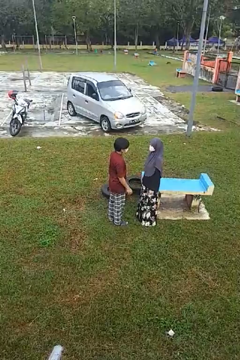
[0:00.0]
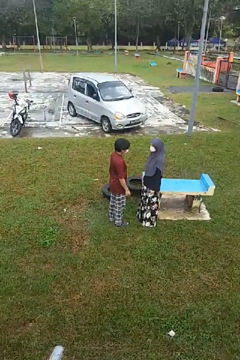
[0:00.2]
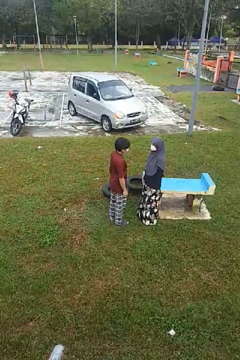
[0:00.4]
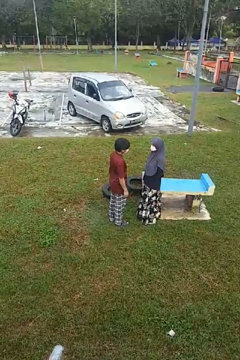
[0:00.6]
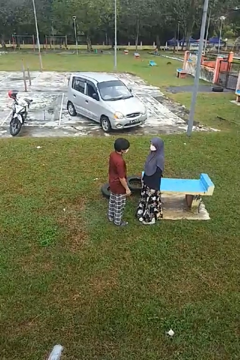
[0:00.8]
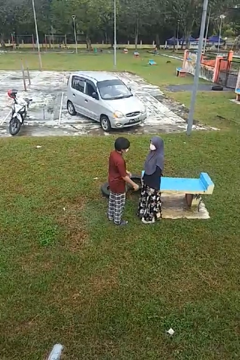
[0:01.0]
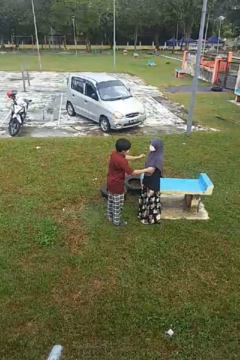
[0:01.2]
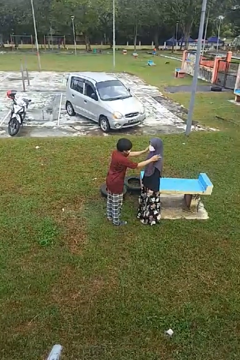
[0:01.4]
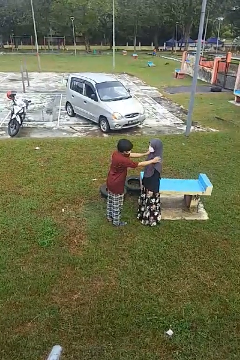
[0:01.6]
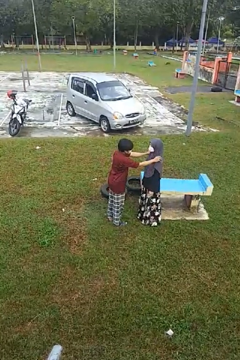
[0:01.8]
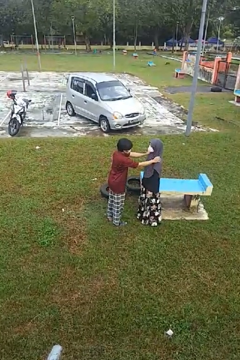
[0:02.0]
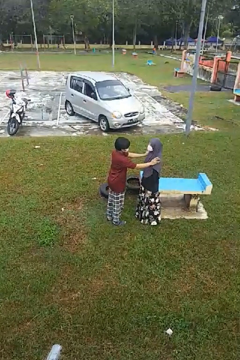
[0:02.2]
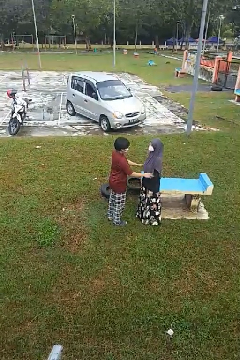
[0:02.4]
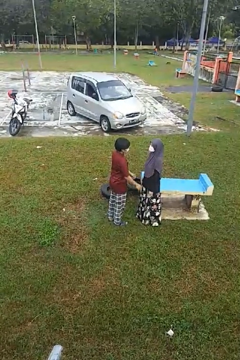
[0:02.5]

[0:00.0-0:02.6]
person pounds shoulders of person

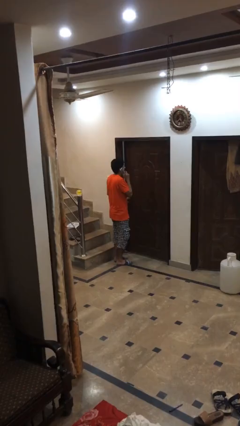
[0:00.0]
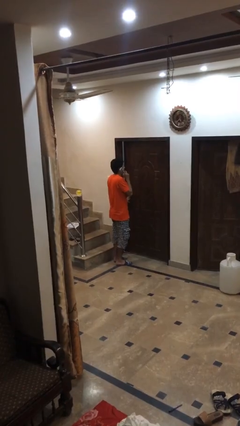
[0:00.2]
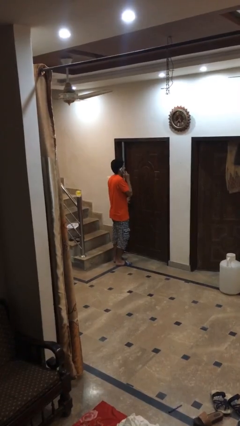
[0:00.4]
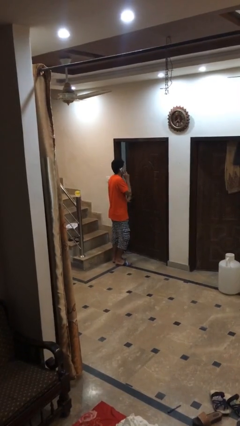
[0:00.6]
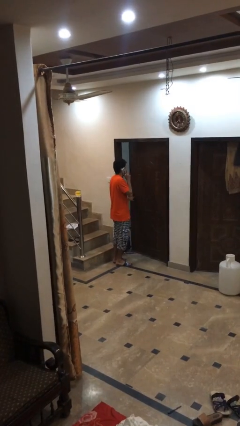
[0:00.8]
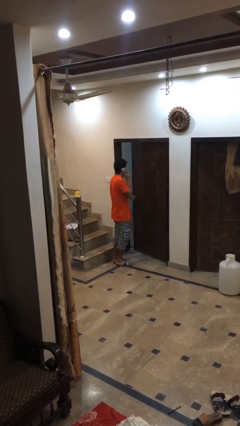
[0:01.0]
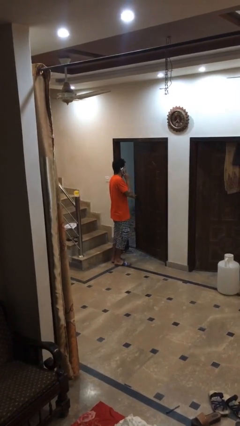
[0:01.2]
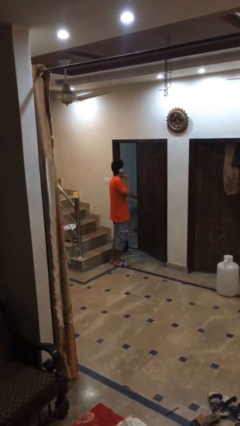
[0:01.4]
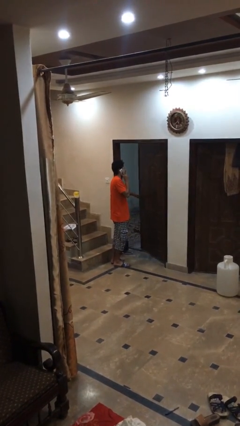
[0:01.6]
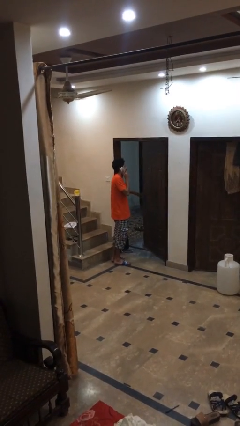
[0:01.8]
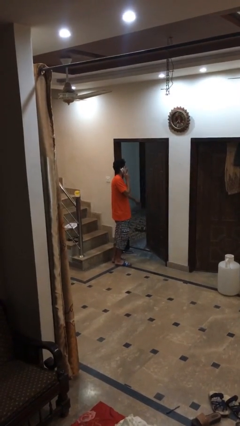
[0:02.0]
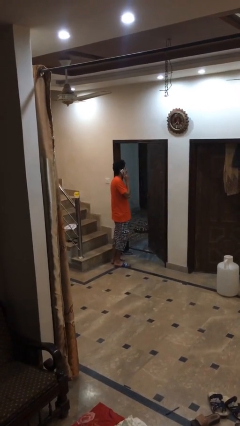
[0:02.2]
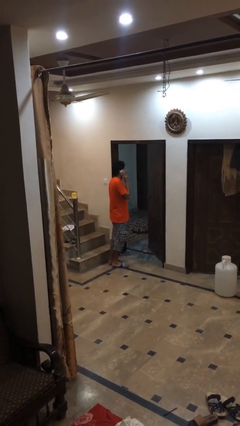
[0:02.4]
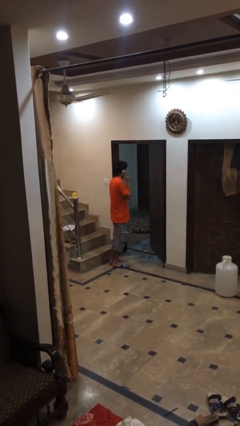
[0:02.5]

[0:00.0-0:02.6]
person opens facility door

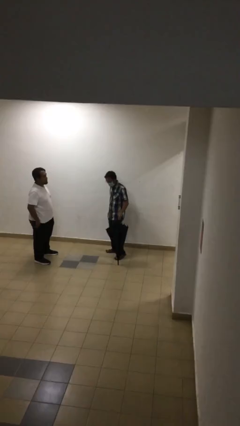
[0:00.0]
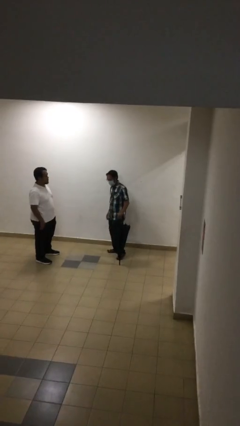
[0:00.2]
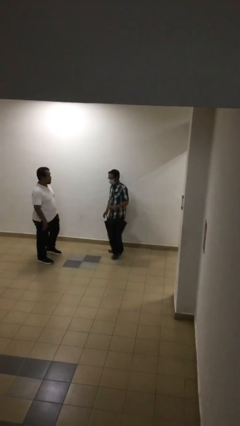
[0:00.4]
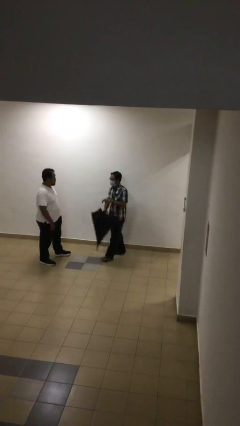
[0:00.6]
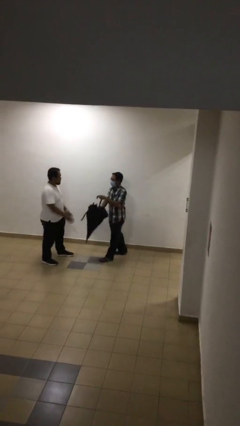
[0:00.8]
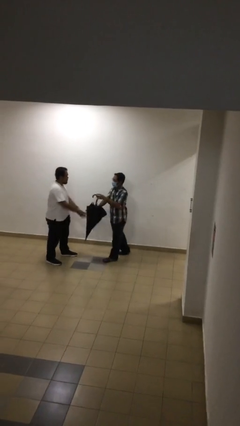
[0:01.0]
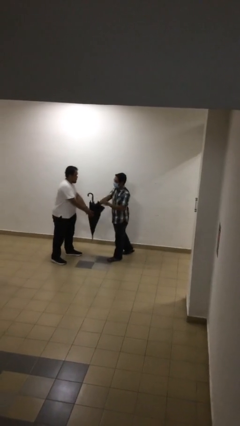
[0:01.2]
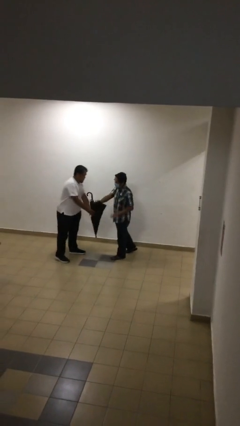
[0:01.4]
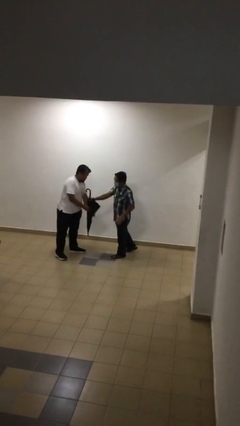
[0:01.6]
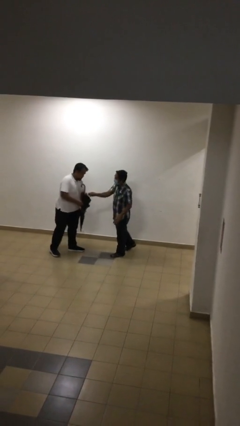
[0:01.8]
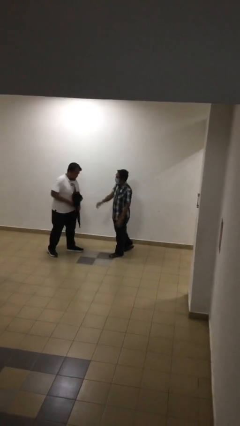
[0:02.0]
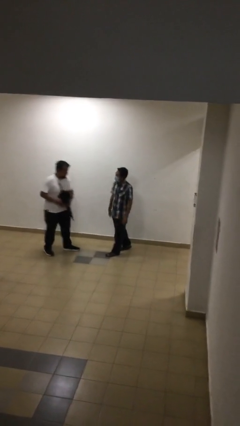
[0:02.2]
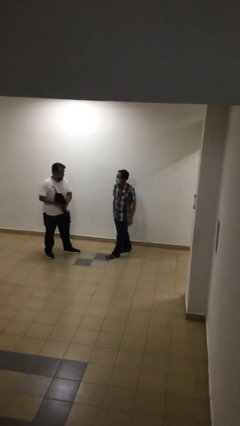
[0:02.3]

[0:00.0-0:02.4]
person transfers object to person

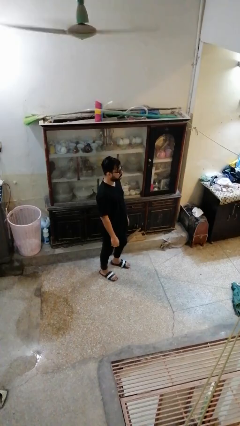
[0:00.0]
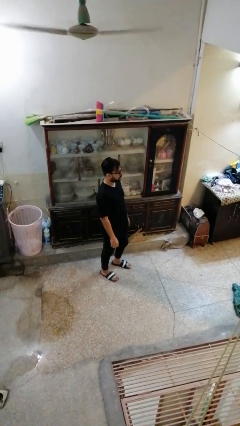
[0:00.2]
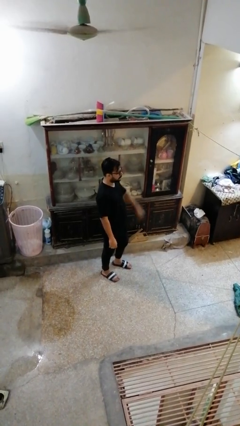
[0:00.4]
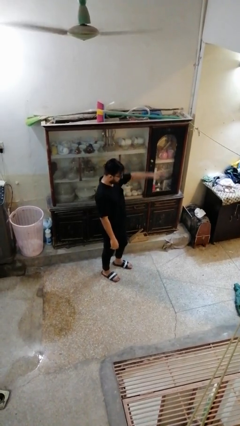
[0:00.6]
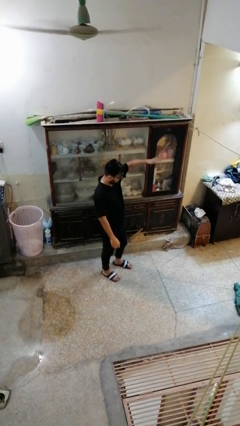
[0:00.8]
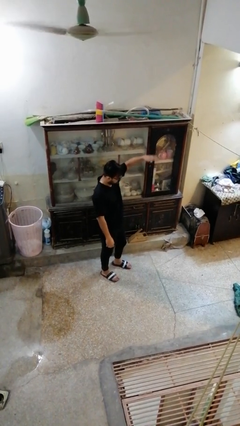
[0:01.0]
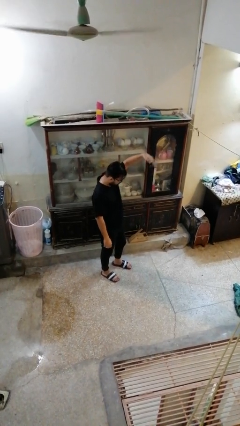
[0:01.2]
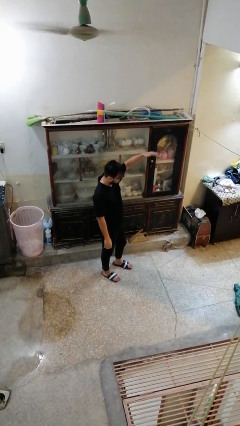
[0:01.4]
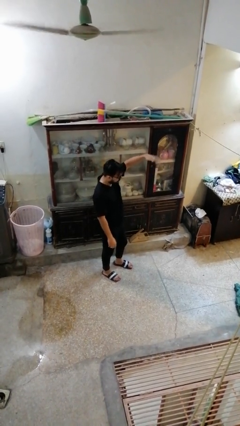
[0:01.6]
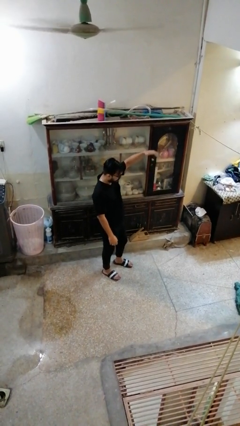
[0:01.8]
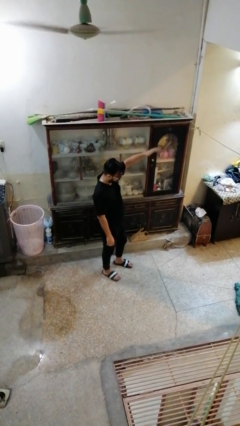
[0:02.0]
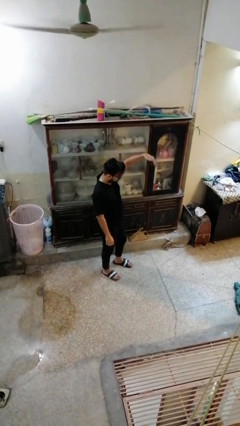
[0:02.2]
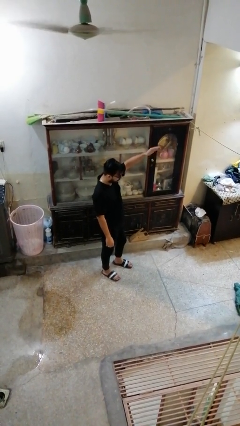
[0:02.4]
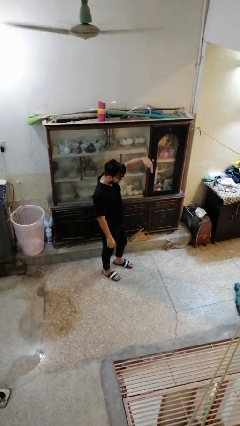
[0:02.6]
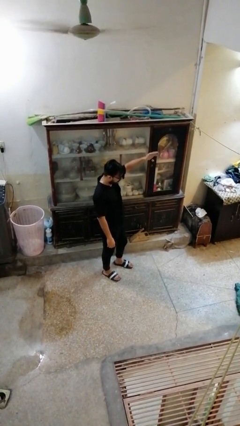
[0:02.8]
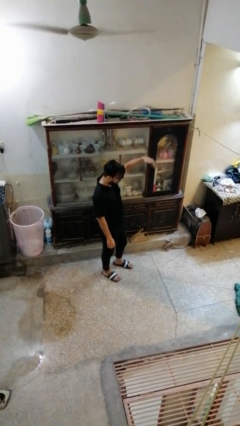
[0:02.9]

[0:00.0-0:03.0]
person gestures come here

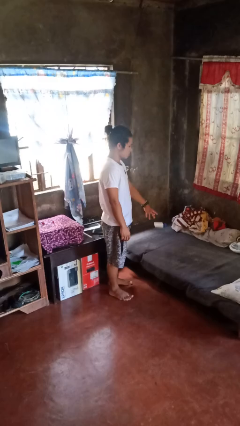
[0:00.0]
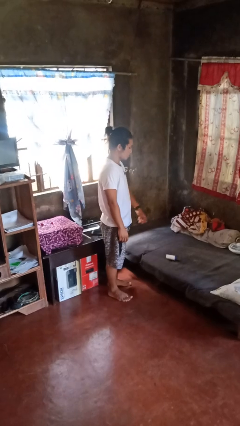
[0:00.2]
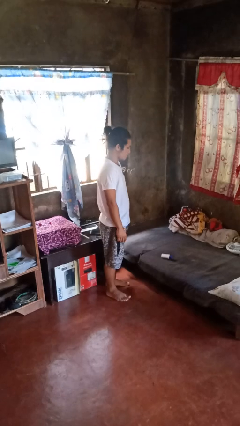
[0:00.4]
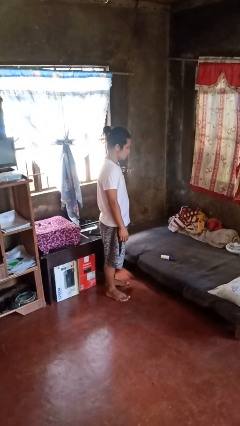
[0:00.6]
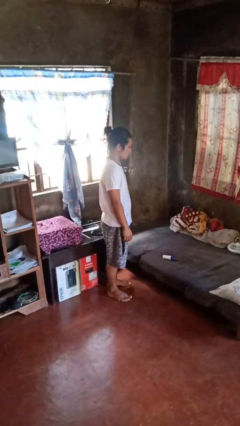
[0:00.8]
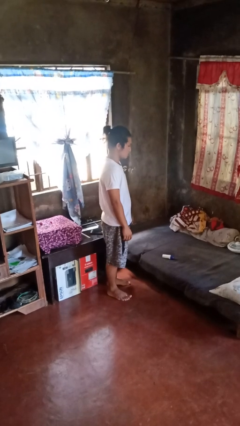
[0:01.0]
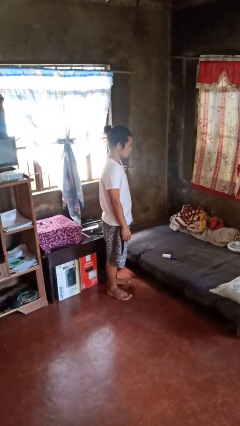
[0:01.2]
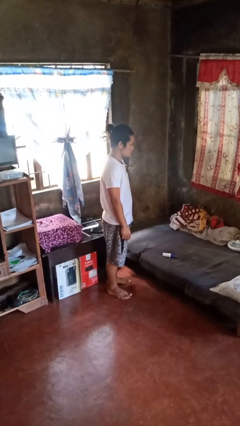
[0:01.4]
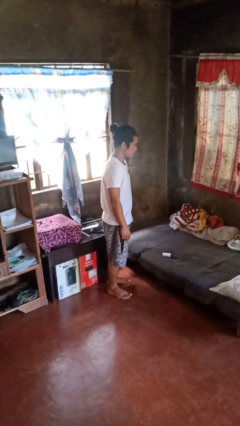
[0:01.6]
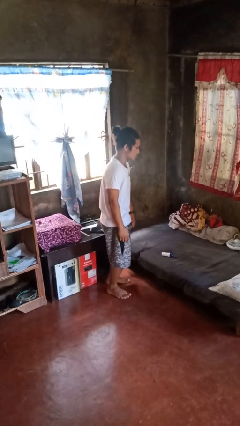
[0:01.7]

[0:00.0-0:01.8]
person throws object on bed

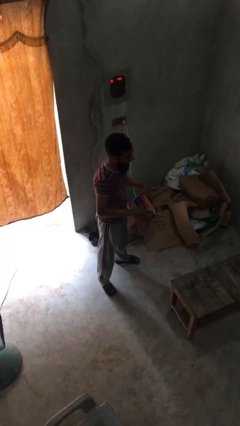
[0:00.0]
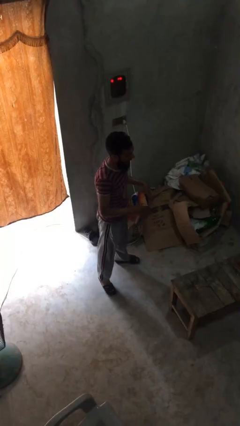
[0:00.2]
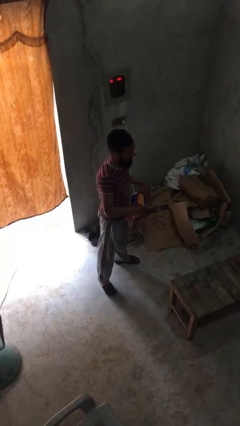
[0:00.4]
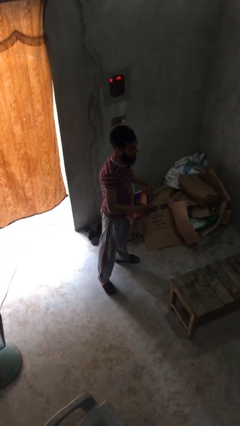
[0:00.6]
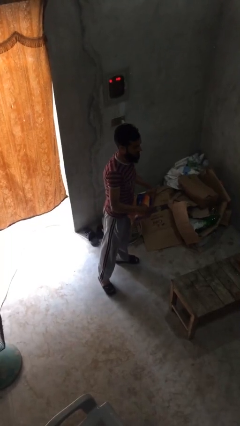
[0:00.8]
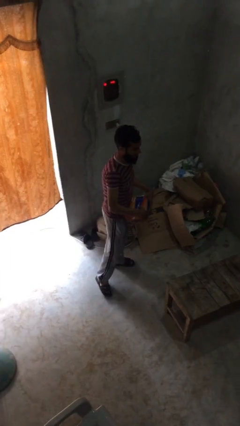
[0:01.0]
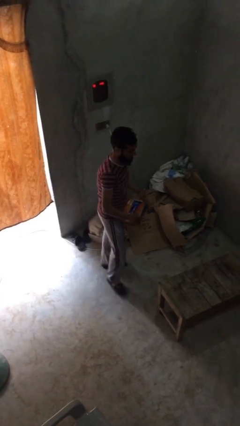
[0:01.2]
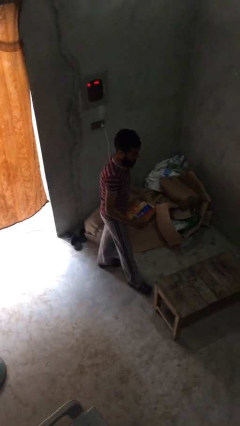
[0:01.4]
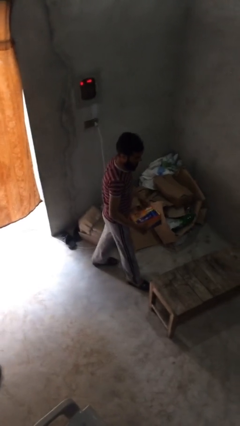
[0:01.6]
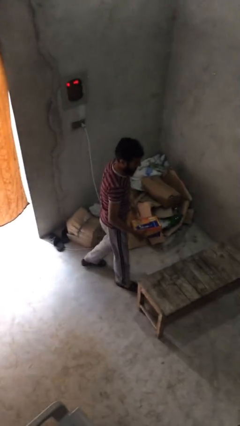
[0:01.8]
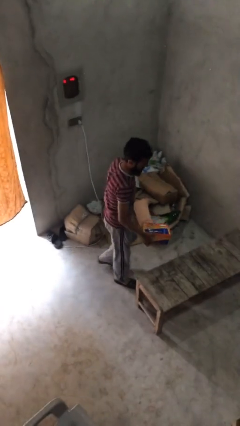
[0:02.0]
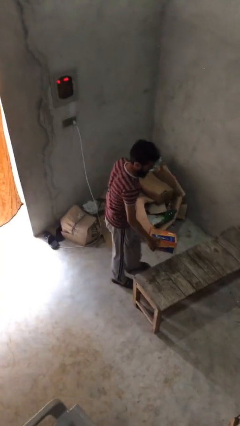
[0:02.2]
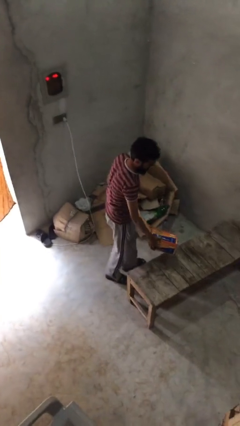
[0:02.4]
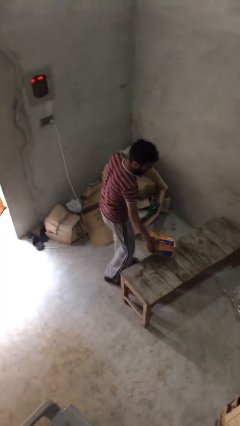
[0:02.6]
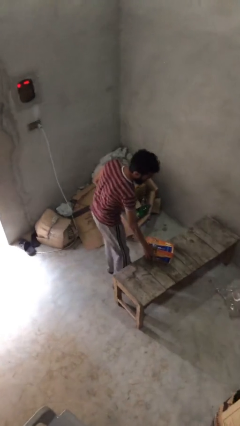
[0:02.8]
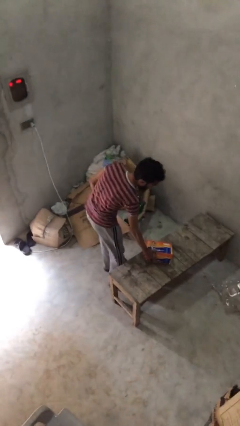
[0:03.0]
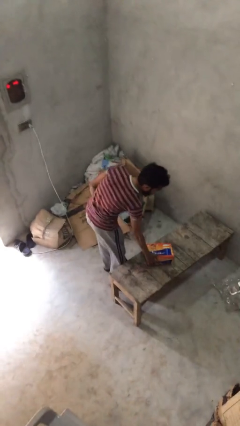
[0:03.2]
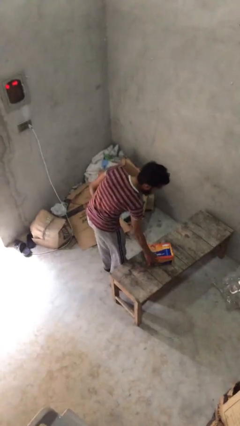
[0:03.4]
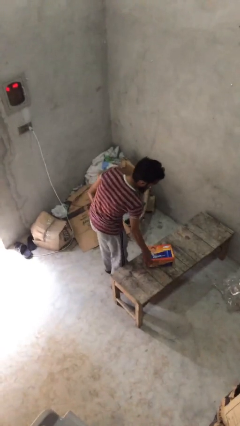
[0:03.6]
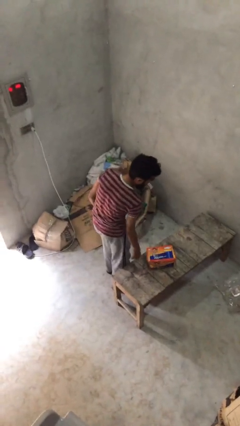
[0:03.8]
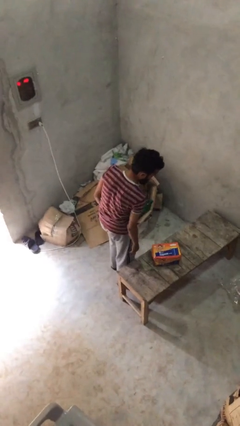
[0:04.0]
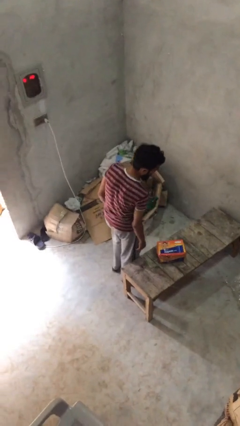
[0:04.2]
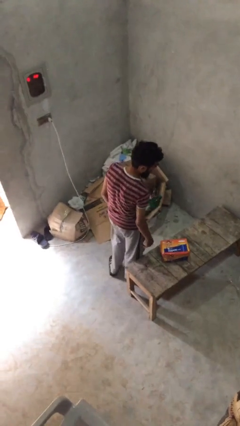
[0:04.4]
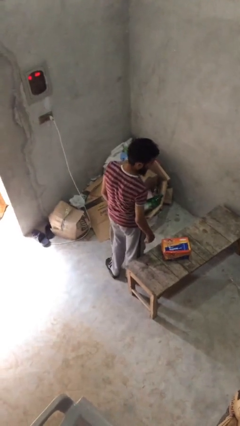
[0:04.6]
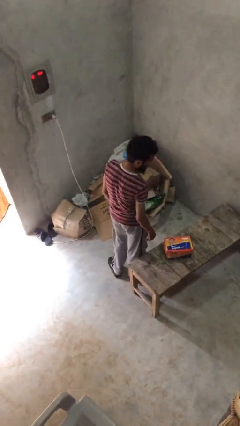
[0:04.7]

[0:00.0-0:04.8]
person puts down object on table

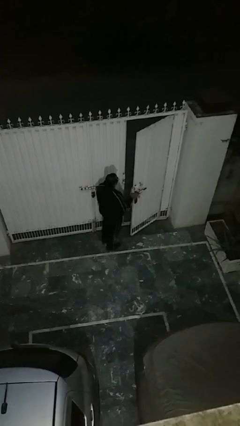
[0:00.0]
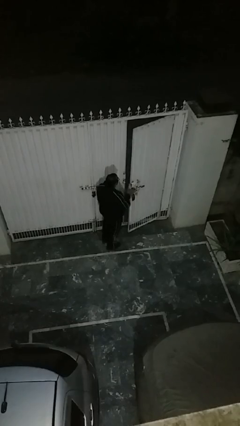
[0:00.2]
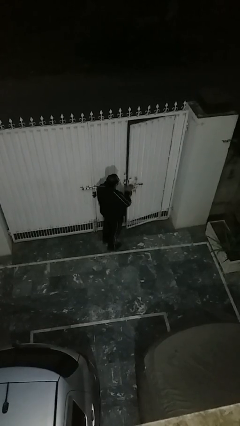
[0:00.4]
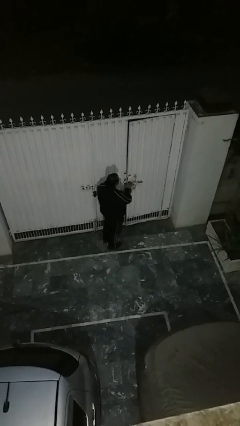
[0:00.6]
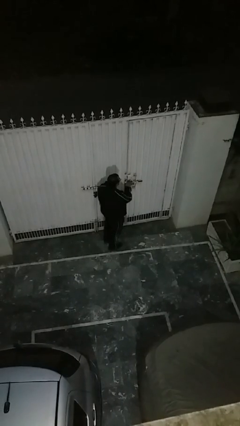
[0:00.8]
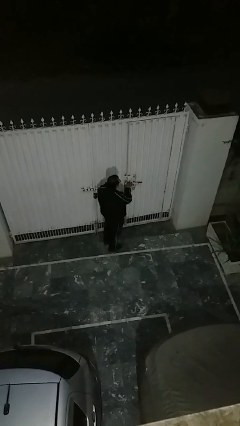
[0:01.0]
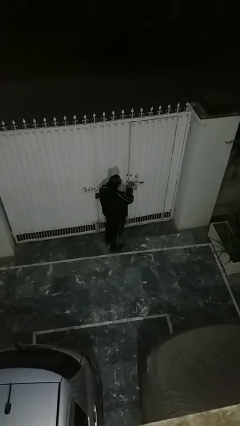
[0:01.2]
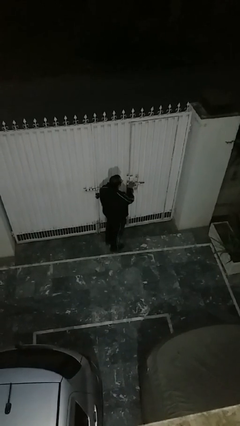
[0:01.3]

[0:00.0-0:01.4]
person closes facility door
